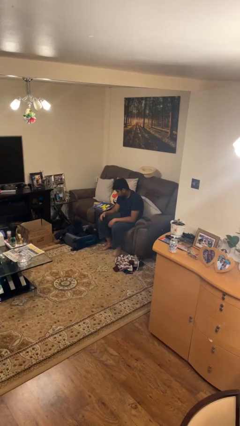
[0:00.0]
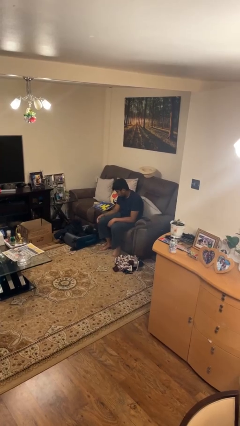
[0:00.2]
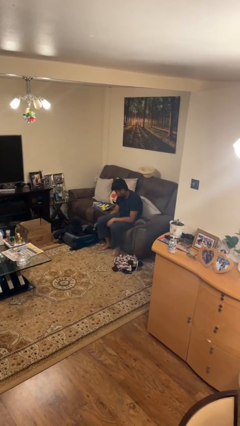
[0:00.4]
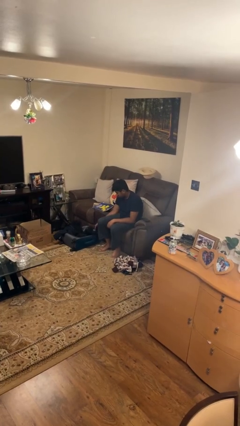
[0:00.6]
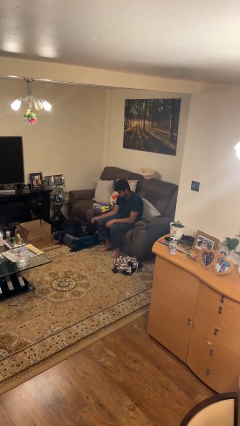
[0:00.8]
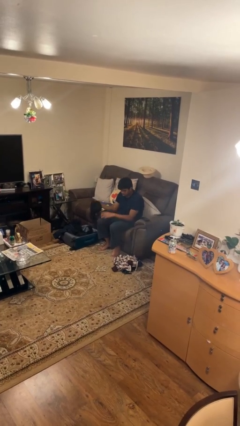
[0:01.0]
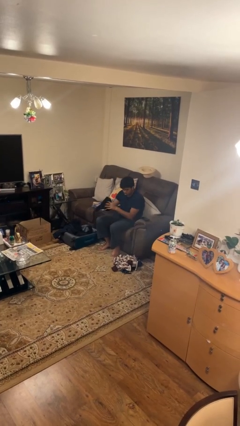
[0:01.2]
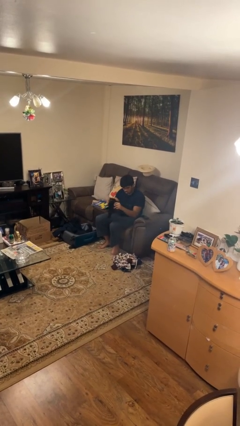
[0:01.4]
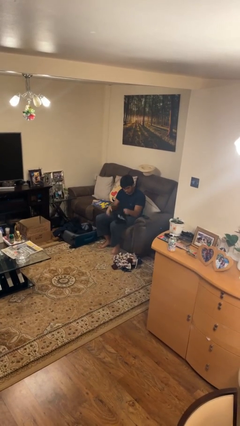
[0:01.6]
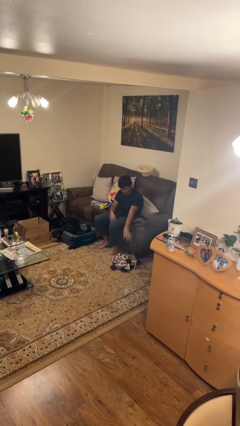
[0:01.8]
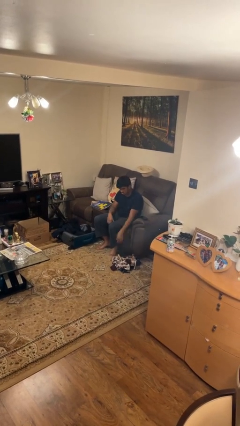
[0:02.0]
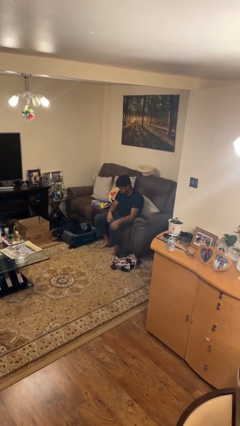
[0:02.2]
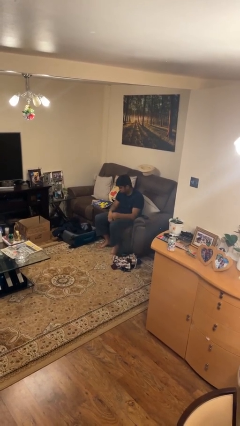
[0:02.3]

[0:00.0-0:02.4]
person unloads clothes from suitcase

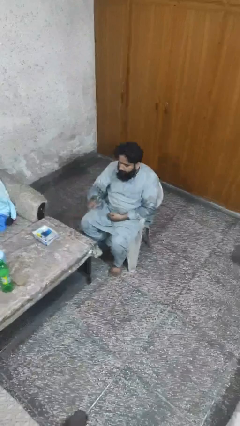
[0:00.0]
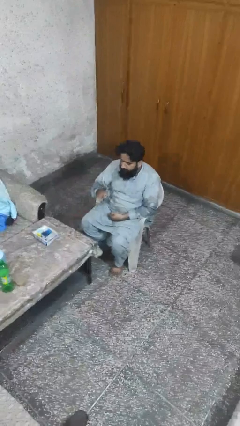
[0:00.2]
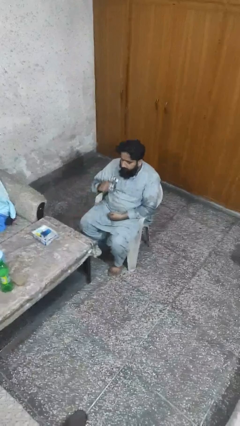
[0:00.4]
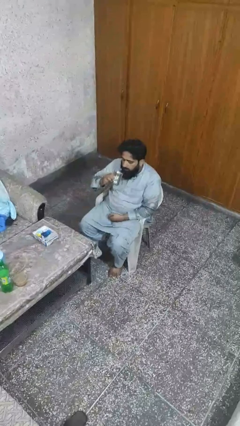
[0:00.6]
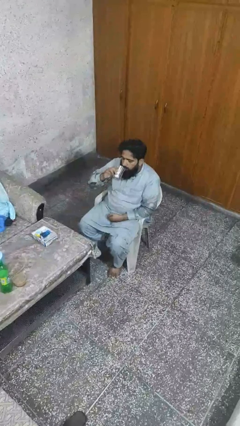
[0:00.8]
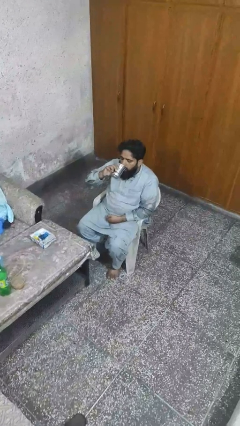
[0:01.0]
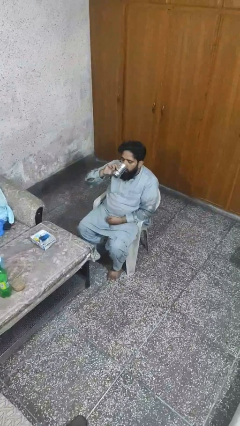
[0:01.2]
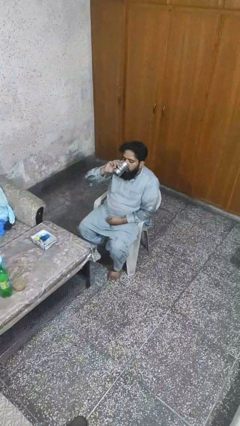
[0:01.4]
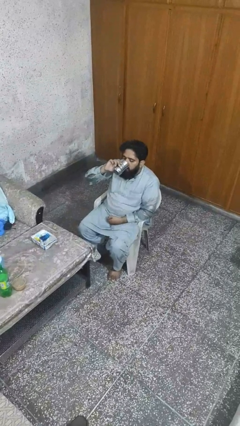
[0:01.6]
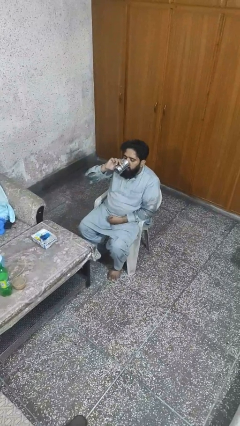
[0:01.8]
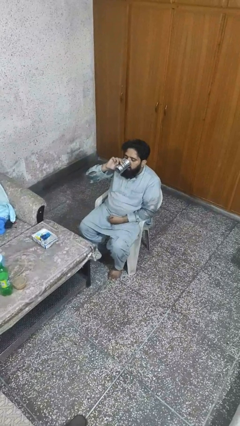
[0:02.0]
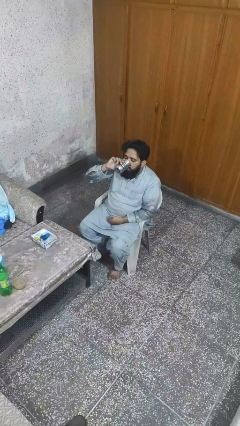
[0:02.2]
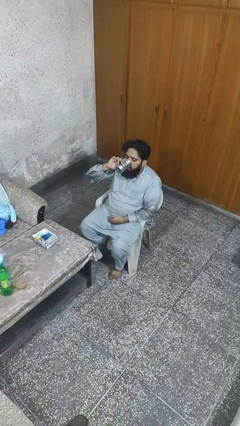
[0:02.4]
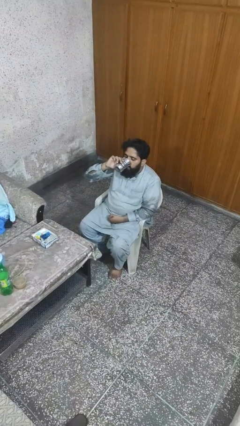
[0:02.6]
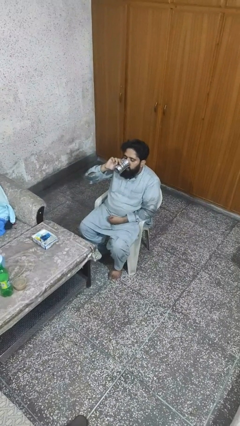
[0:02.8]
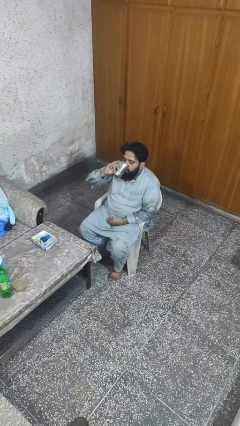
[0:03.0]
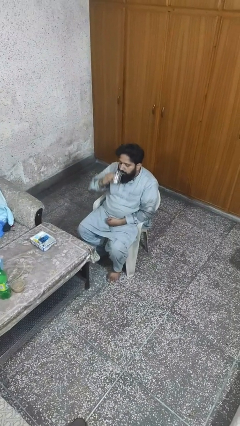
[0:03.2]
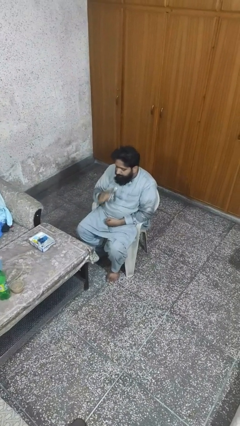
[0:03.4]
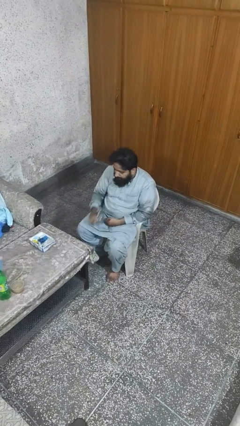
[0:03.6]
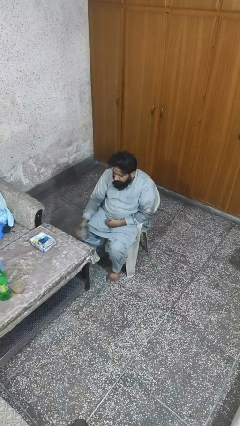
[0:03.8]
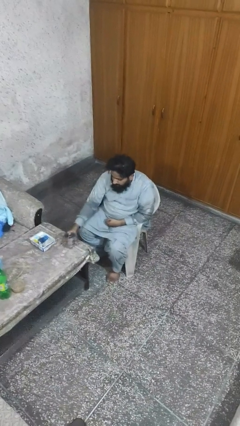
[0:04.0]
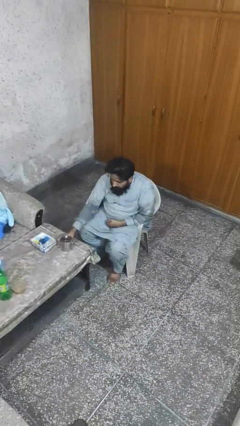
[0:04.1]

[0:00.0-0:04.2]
person drinks from cup

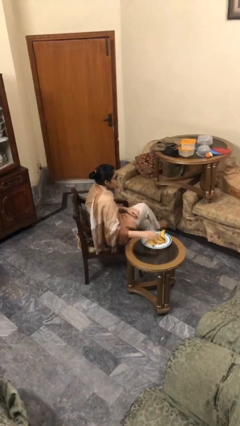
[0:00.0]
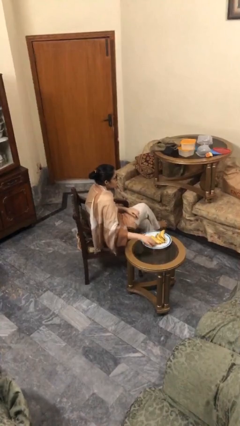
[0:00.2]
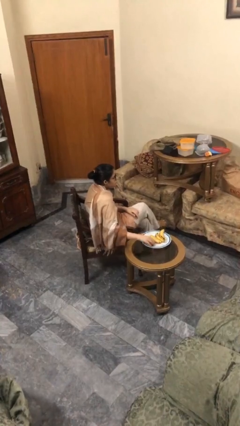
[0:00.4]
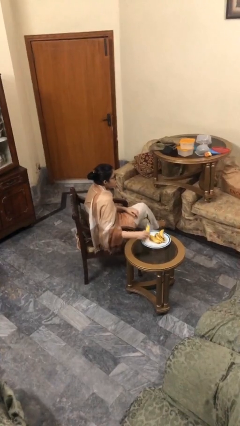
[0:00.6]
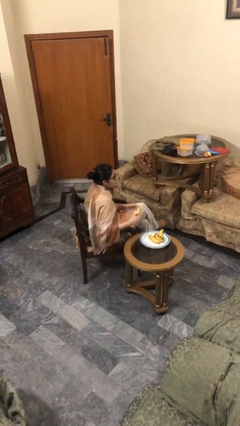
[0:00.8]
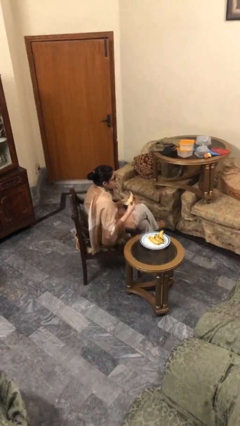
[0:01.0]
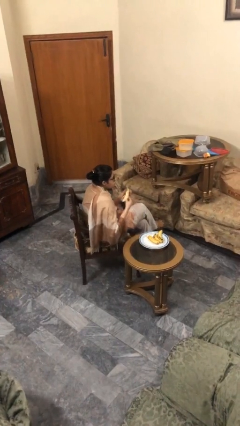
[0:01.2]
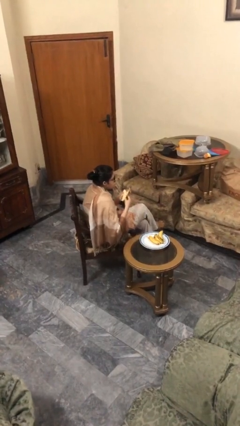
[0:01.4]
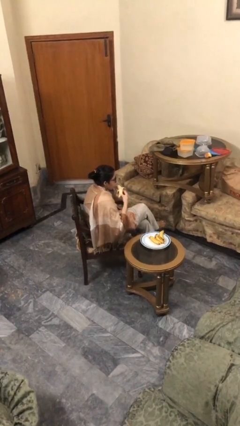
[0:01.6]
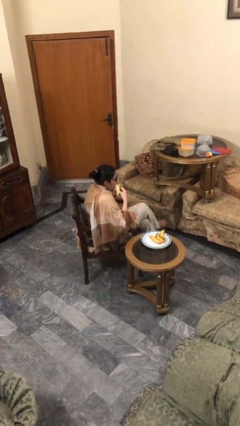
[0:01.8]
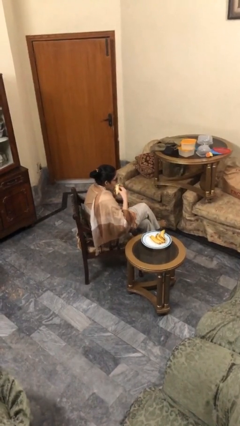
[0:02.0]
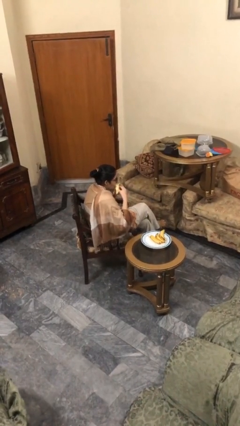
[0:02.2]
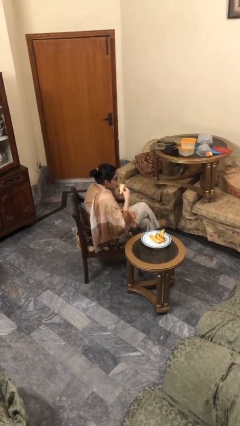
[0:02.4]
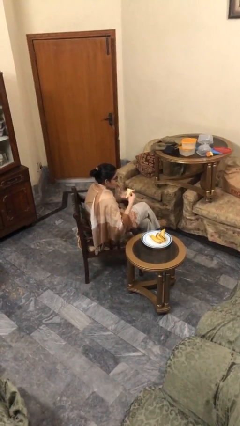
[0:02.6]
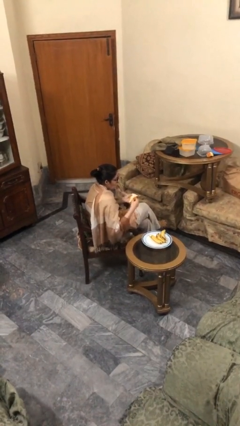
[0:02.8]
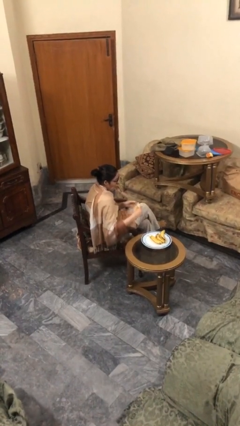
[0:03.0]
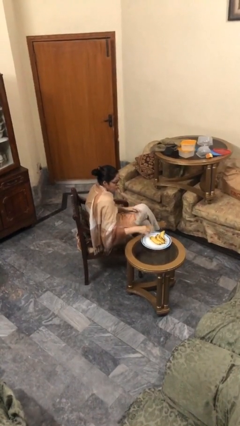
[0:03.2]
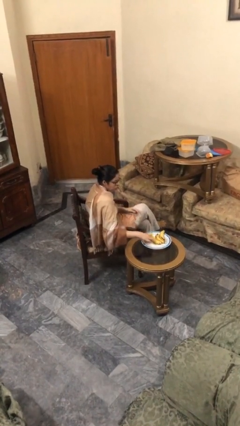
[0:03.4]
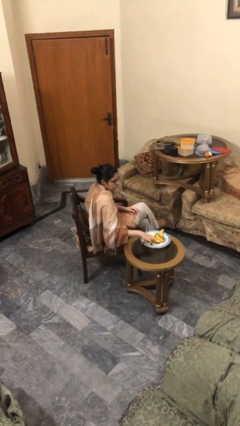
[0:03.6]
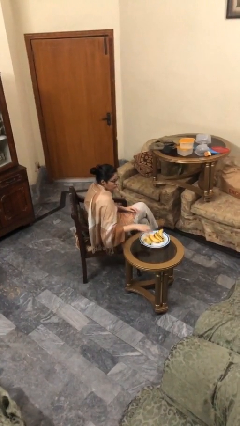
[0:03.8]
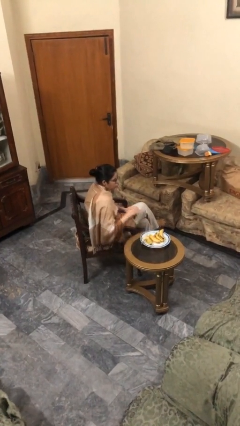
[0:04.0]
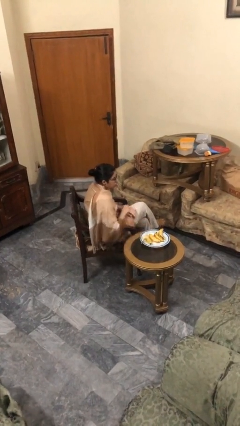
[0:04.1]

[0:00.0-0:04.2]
person eats banana

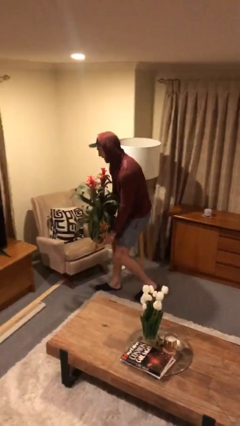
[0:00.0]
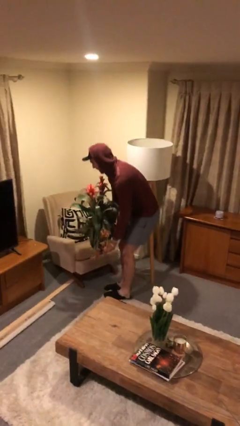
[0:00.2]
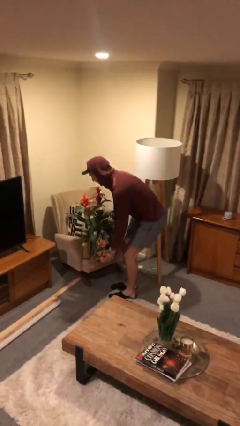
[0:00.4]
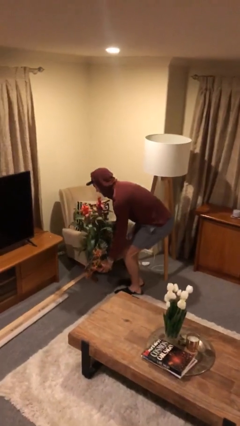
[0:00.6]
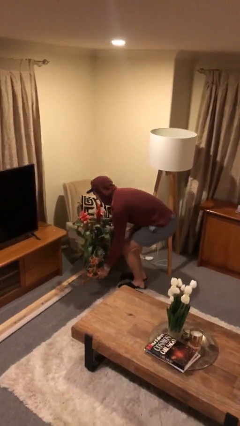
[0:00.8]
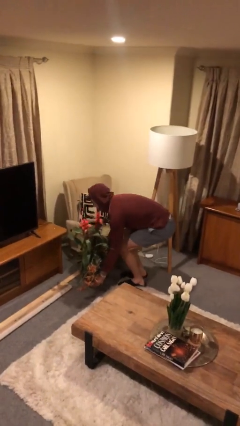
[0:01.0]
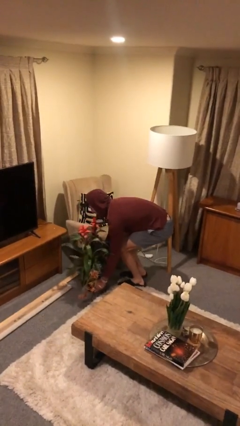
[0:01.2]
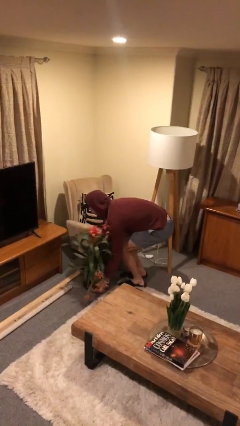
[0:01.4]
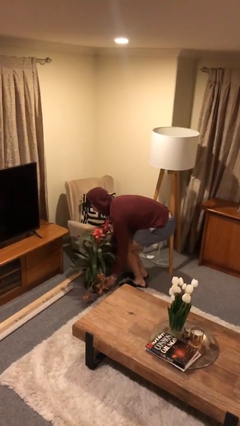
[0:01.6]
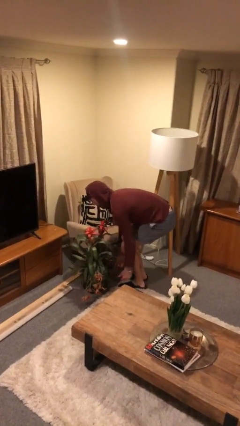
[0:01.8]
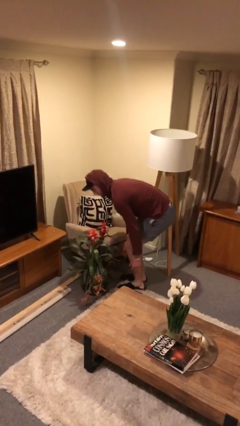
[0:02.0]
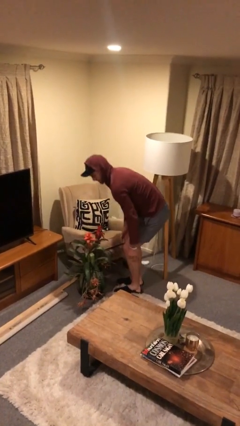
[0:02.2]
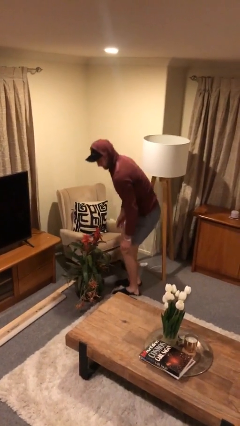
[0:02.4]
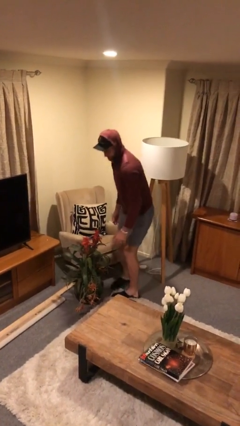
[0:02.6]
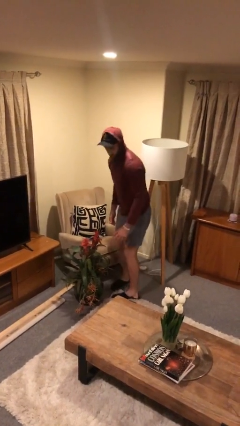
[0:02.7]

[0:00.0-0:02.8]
person puts down object on floor

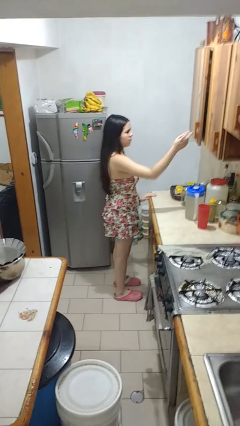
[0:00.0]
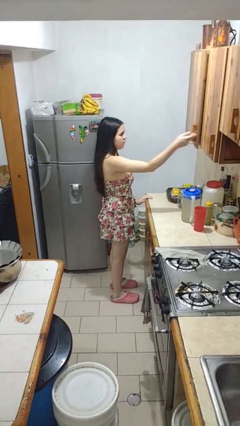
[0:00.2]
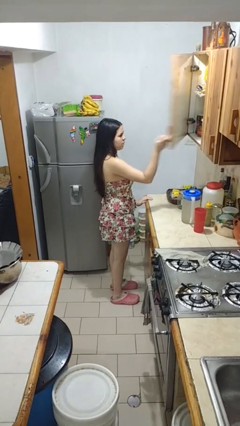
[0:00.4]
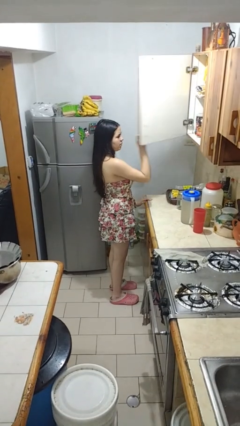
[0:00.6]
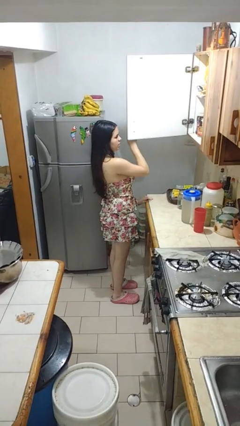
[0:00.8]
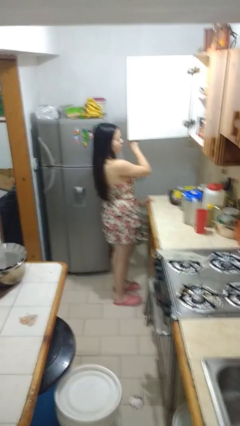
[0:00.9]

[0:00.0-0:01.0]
person opens cabinet

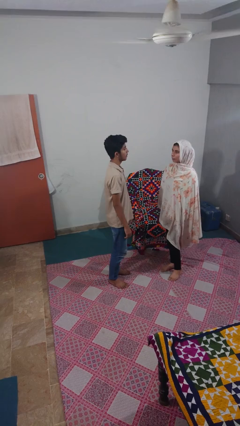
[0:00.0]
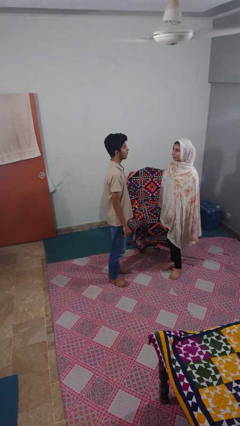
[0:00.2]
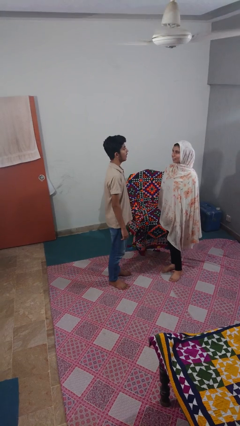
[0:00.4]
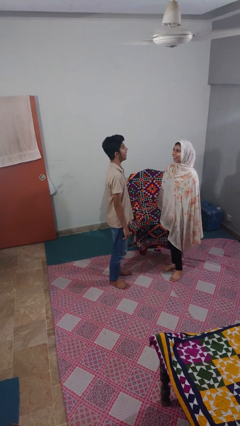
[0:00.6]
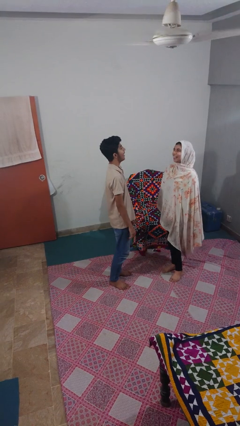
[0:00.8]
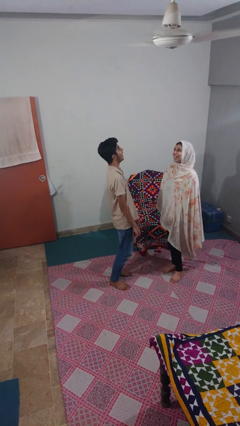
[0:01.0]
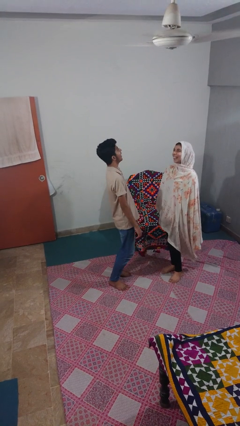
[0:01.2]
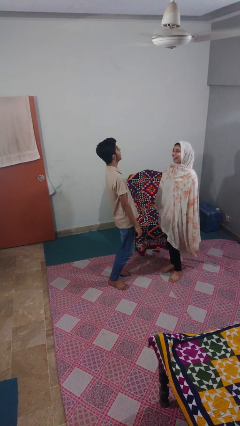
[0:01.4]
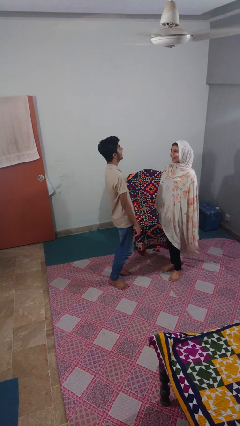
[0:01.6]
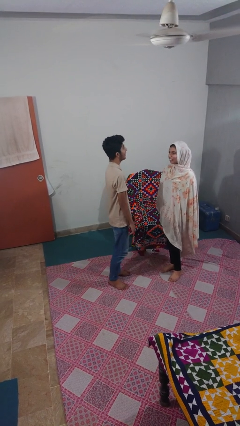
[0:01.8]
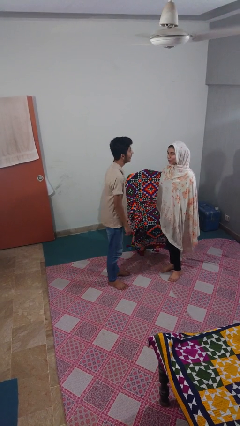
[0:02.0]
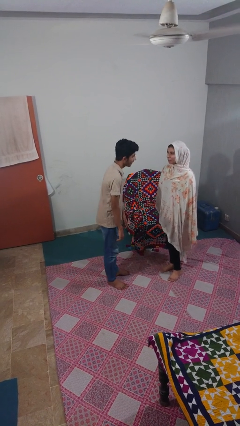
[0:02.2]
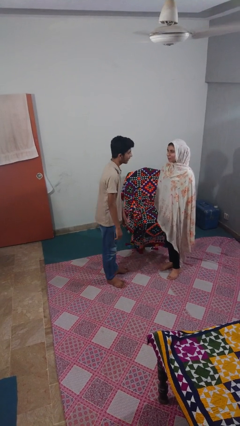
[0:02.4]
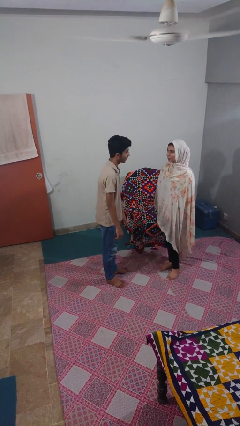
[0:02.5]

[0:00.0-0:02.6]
person laughs with person
